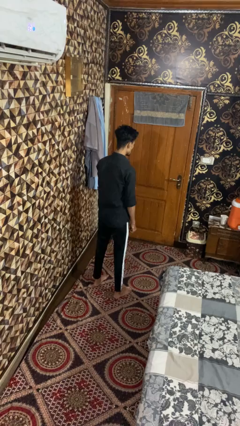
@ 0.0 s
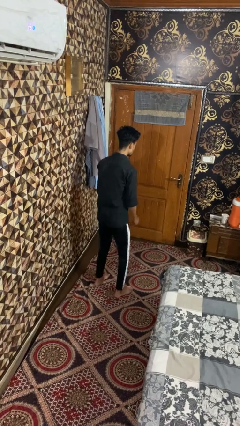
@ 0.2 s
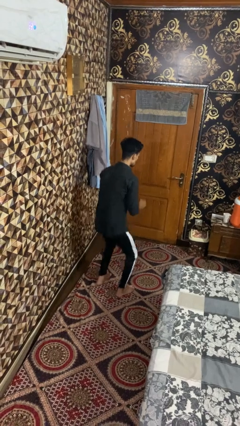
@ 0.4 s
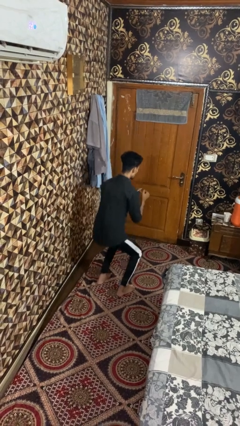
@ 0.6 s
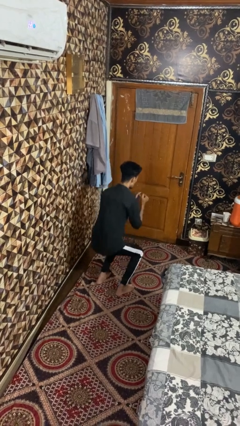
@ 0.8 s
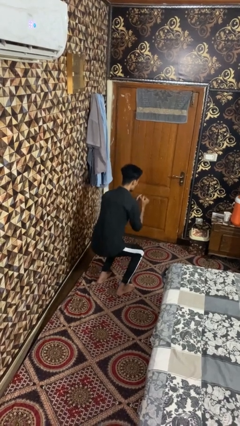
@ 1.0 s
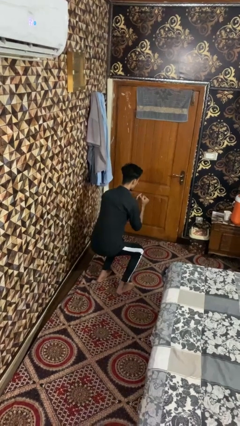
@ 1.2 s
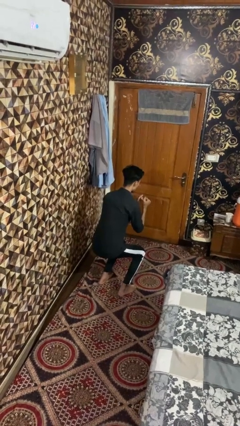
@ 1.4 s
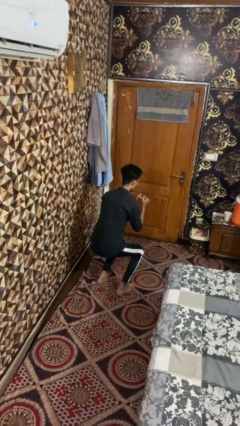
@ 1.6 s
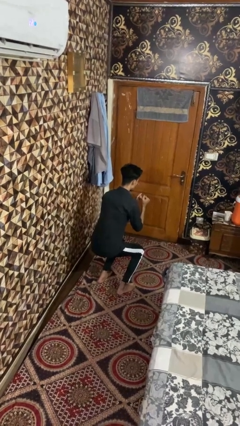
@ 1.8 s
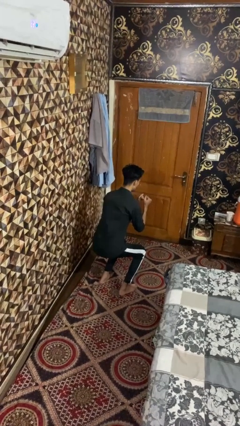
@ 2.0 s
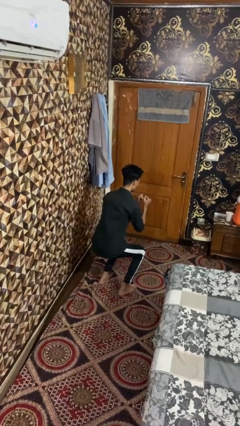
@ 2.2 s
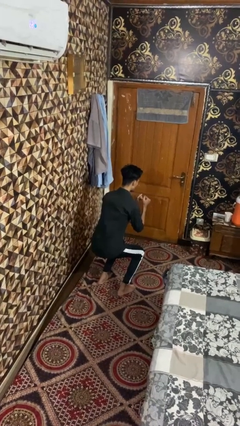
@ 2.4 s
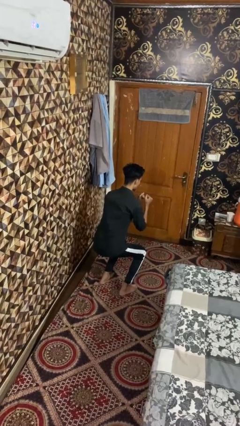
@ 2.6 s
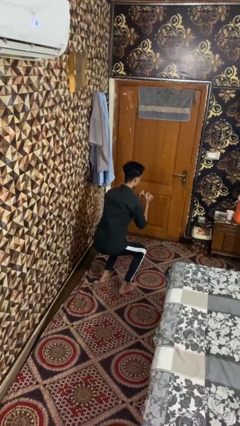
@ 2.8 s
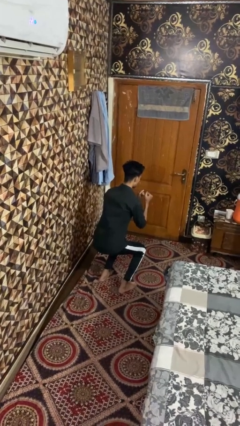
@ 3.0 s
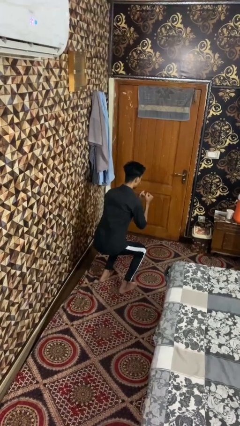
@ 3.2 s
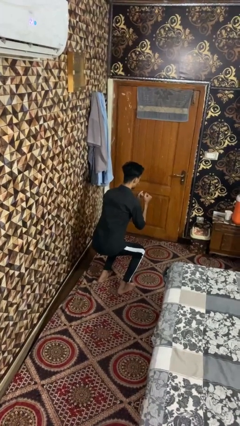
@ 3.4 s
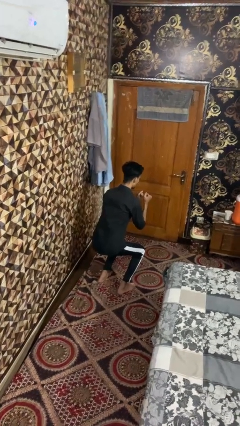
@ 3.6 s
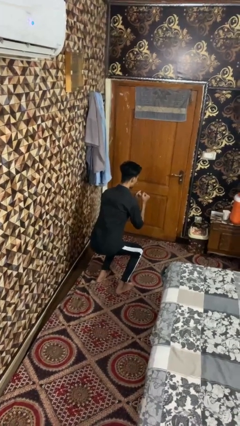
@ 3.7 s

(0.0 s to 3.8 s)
person squats

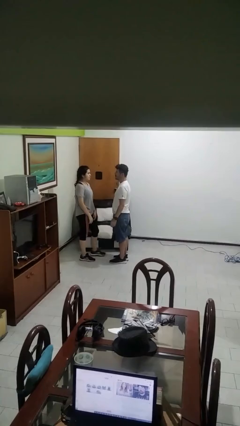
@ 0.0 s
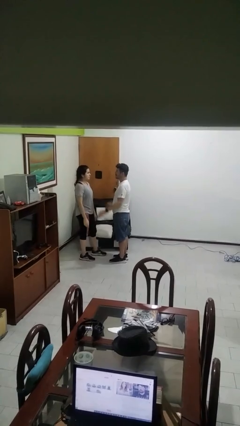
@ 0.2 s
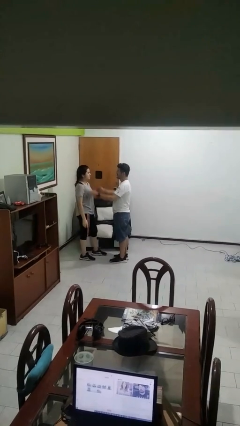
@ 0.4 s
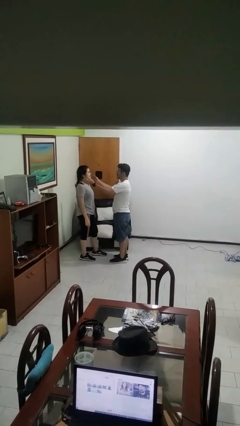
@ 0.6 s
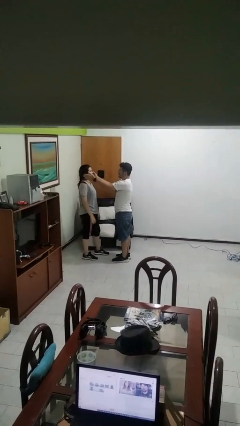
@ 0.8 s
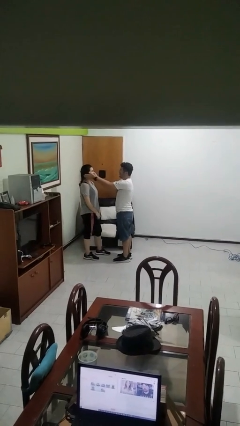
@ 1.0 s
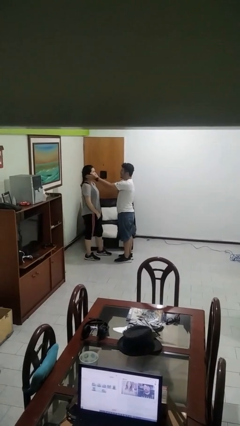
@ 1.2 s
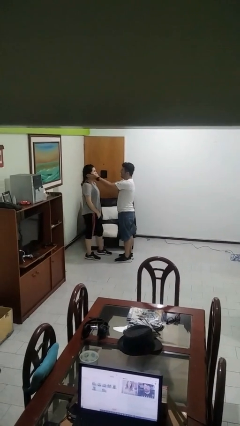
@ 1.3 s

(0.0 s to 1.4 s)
person touches face of person

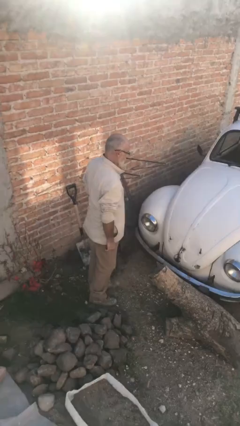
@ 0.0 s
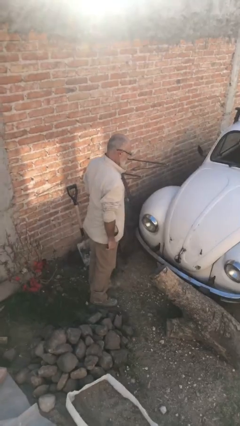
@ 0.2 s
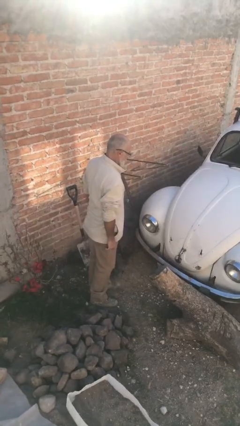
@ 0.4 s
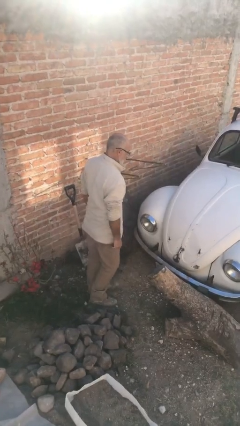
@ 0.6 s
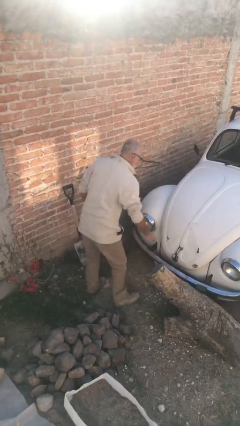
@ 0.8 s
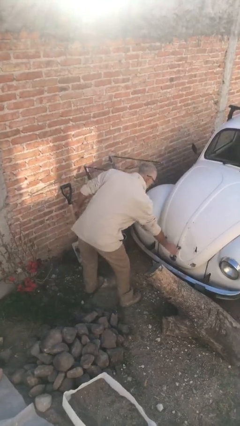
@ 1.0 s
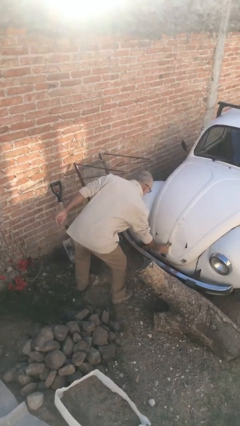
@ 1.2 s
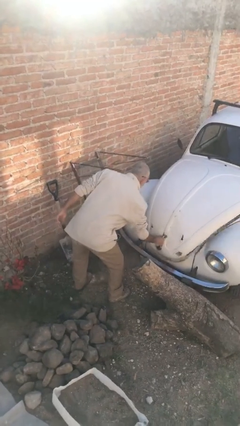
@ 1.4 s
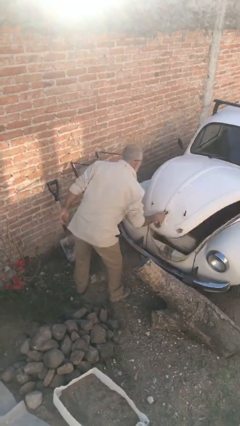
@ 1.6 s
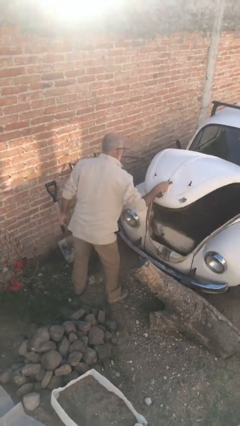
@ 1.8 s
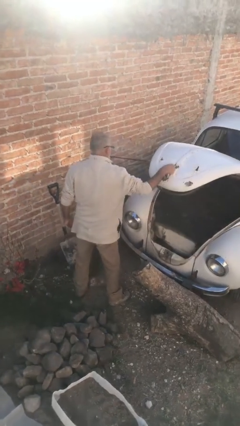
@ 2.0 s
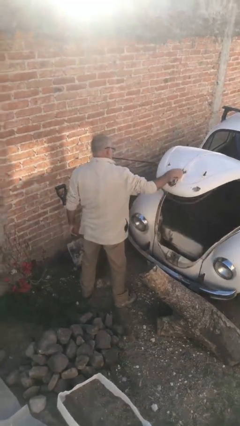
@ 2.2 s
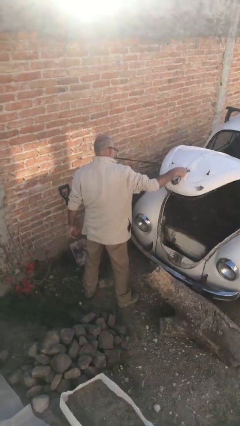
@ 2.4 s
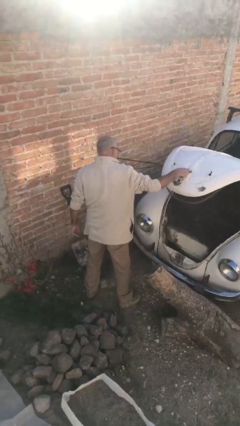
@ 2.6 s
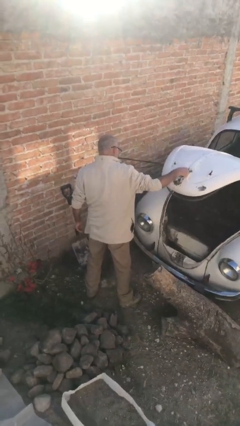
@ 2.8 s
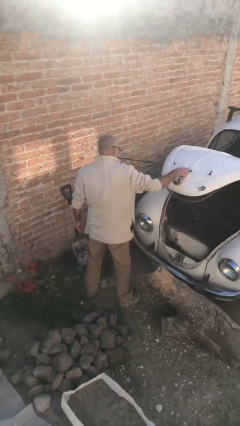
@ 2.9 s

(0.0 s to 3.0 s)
person opens car trunk

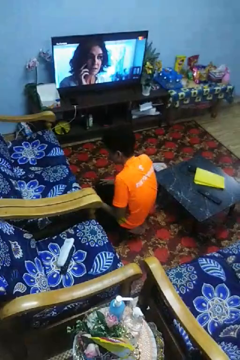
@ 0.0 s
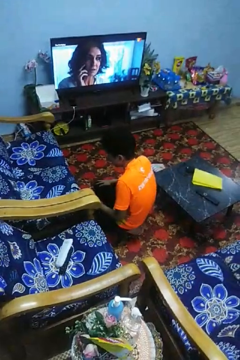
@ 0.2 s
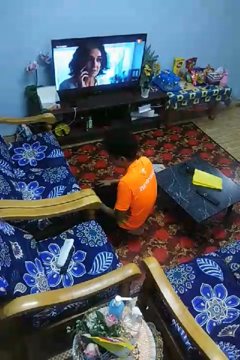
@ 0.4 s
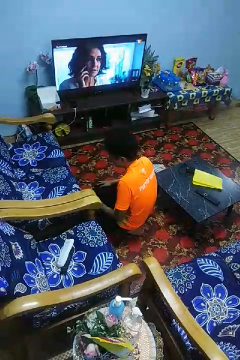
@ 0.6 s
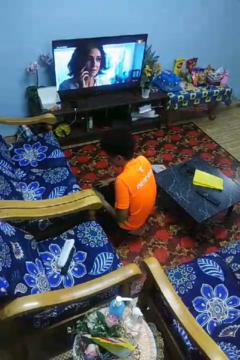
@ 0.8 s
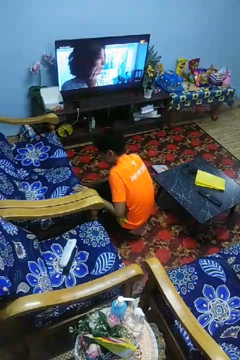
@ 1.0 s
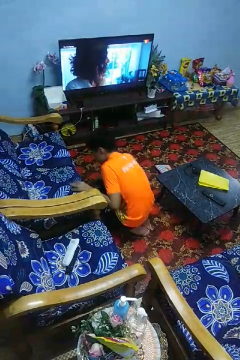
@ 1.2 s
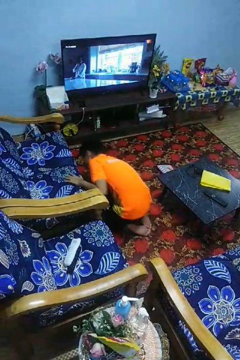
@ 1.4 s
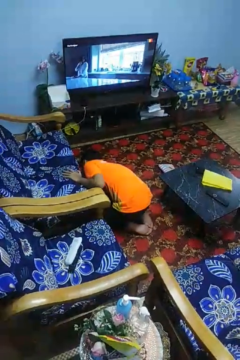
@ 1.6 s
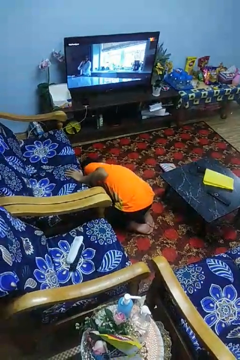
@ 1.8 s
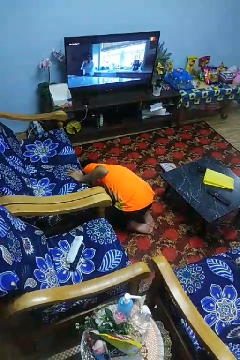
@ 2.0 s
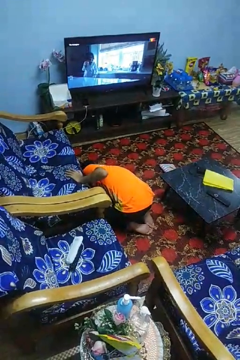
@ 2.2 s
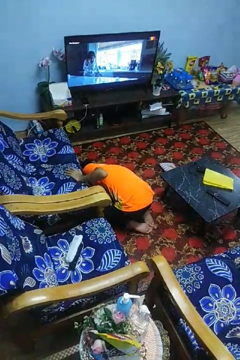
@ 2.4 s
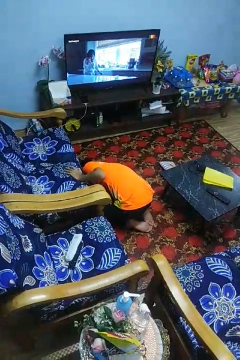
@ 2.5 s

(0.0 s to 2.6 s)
person searches under couch

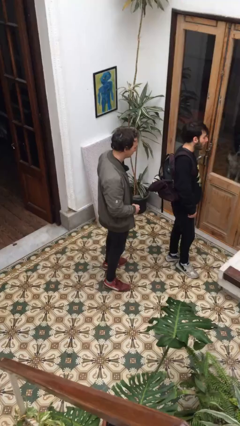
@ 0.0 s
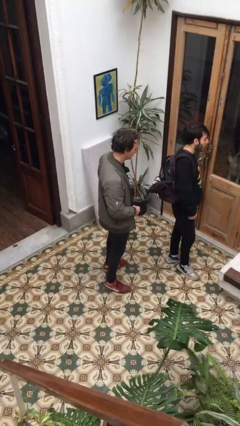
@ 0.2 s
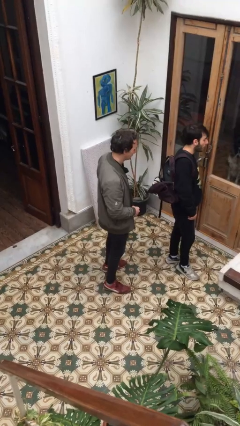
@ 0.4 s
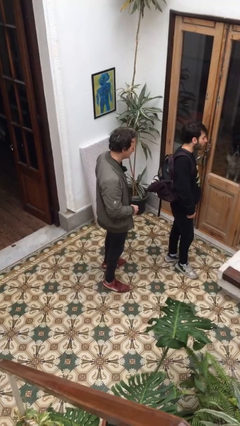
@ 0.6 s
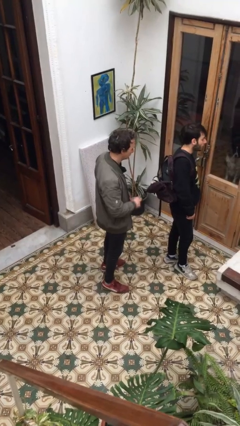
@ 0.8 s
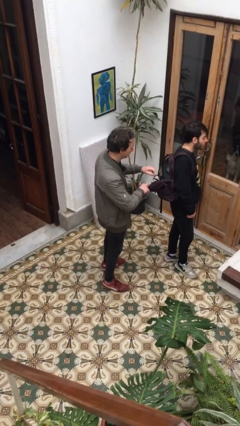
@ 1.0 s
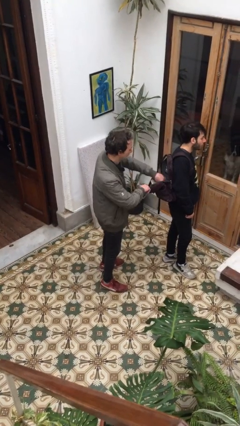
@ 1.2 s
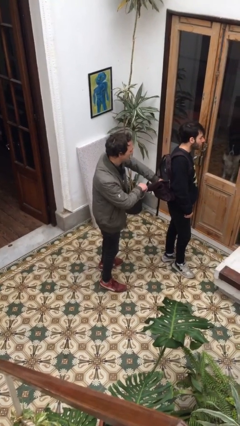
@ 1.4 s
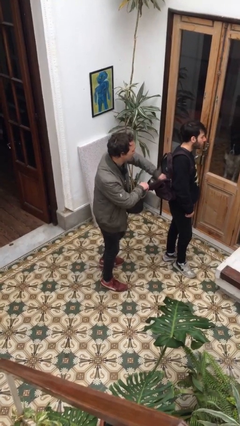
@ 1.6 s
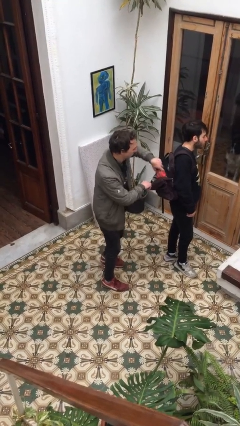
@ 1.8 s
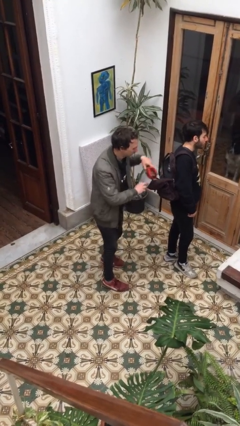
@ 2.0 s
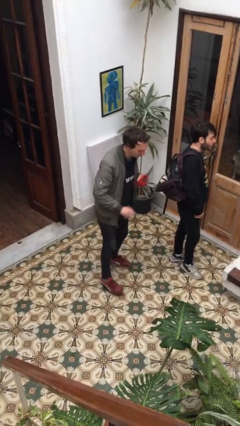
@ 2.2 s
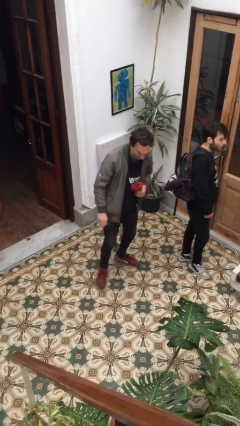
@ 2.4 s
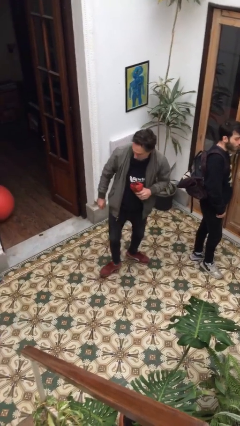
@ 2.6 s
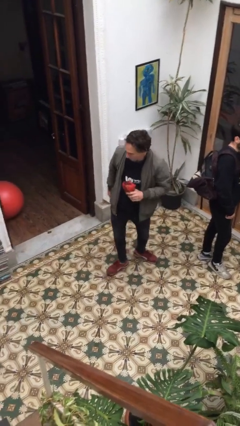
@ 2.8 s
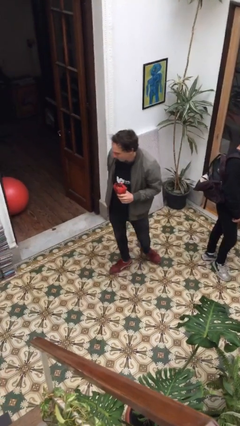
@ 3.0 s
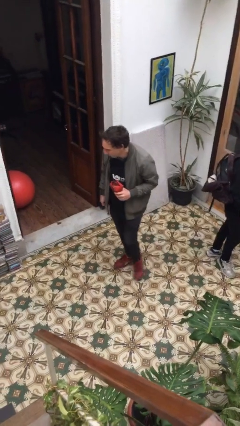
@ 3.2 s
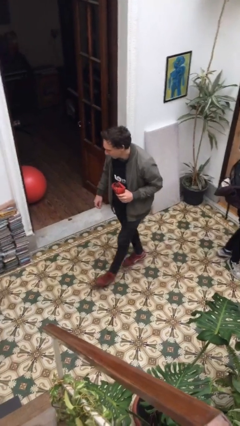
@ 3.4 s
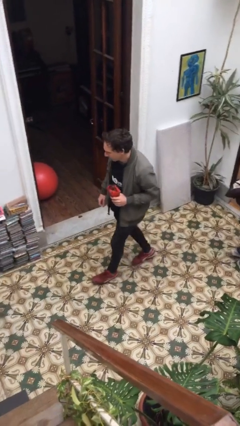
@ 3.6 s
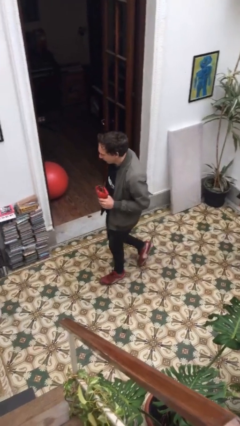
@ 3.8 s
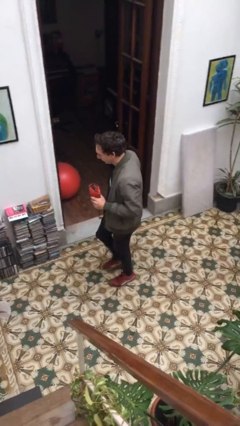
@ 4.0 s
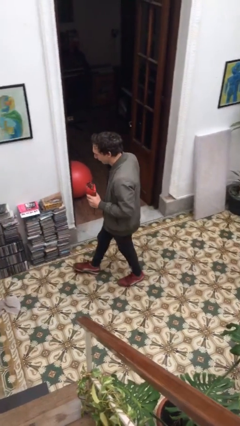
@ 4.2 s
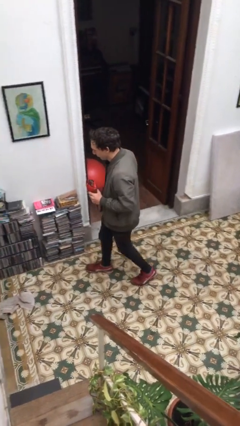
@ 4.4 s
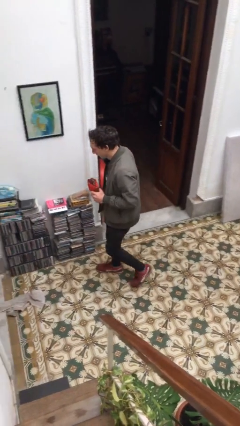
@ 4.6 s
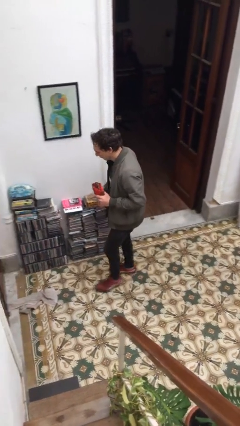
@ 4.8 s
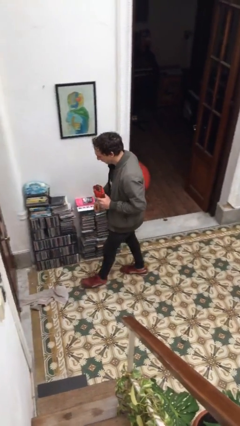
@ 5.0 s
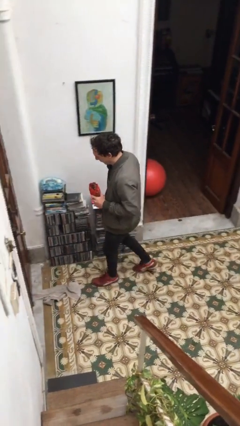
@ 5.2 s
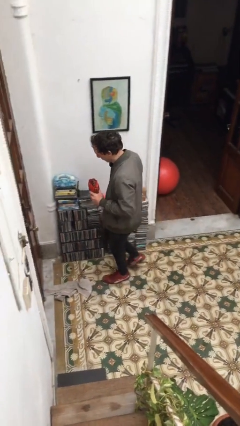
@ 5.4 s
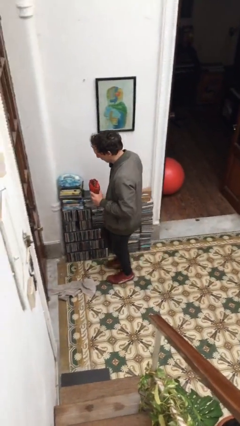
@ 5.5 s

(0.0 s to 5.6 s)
person steals object from person

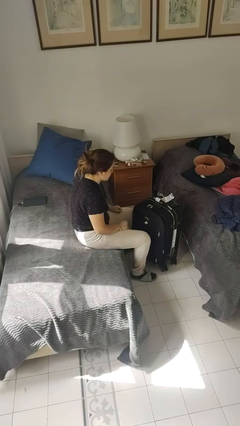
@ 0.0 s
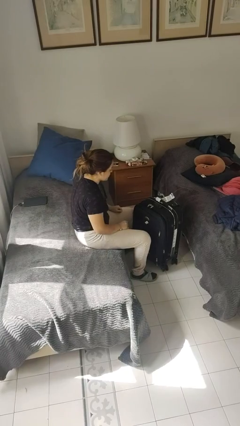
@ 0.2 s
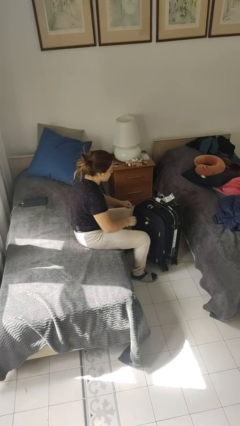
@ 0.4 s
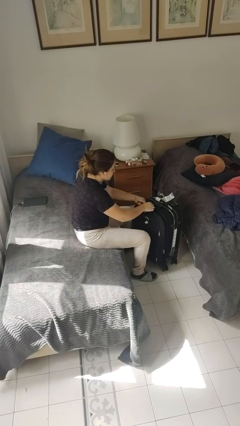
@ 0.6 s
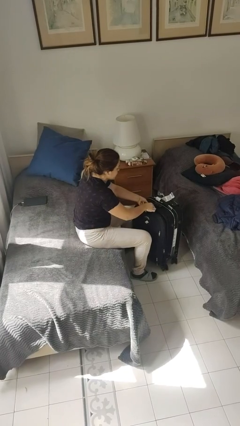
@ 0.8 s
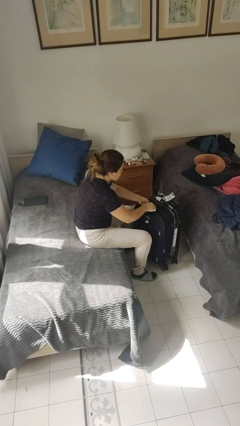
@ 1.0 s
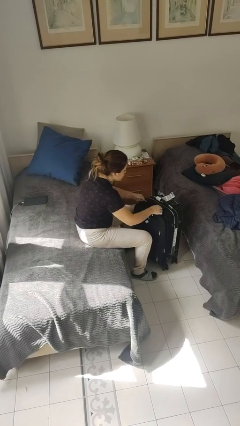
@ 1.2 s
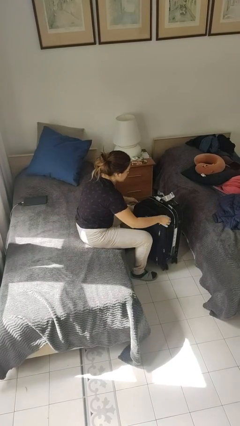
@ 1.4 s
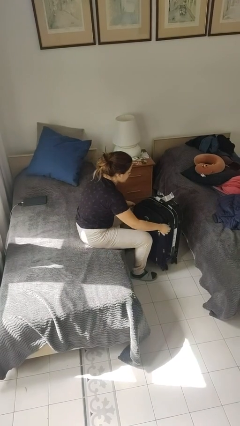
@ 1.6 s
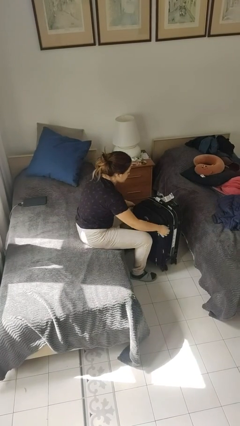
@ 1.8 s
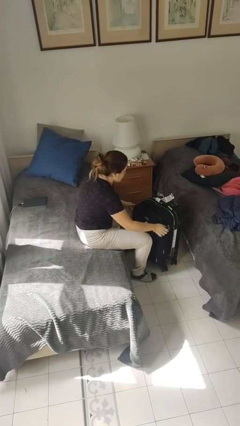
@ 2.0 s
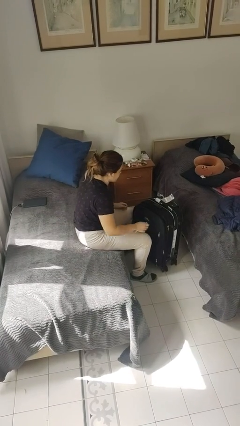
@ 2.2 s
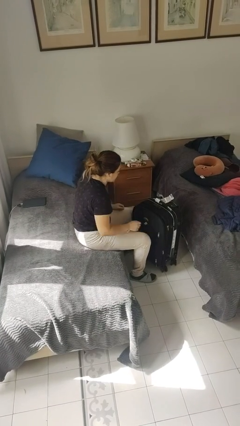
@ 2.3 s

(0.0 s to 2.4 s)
person opens suitcase
